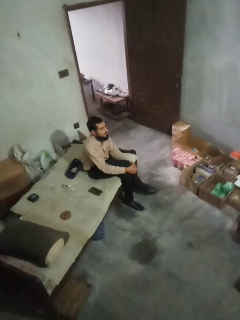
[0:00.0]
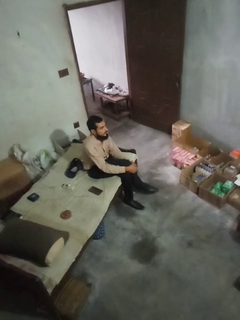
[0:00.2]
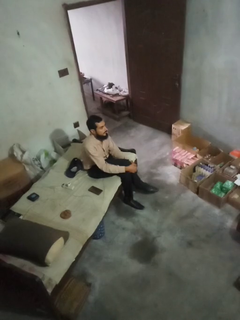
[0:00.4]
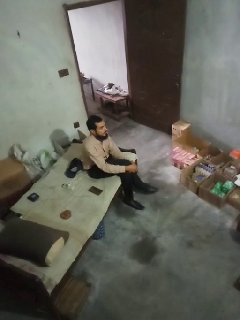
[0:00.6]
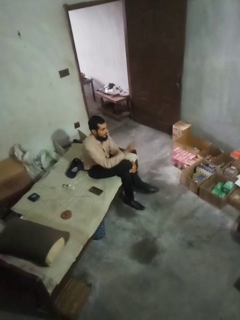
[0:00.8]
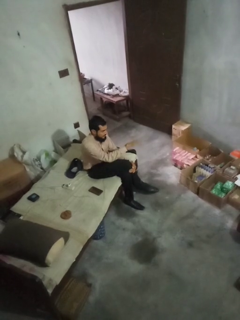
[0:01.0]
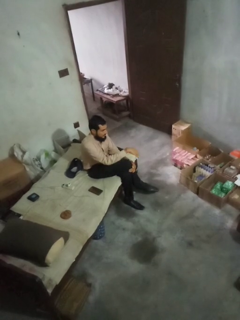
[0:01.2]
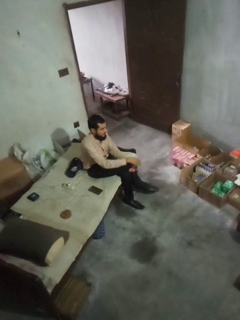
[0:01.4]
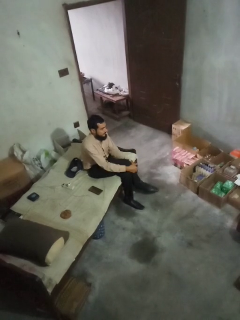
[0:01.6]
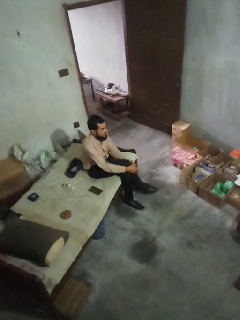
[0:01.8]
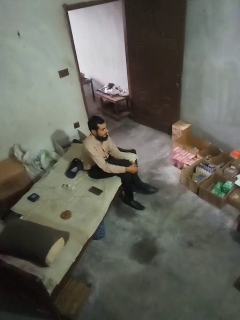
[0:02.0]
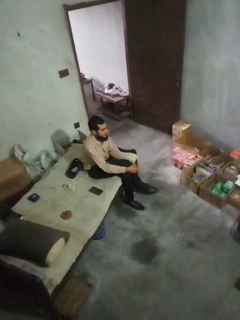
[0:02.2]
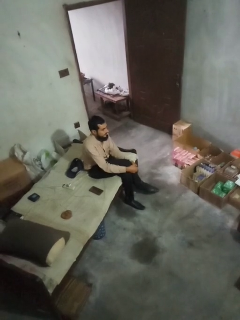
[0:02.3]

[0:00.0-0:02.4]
person gestures swipe down

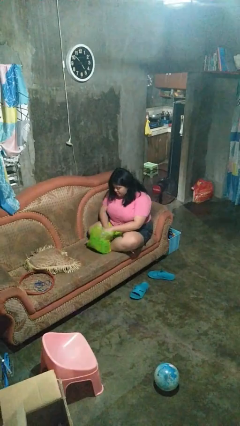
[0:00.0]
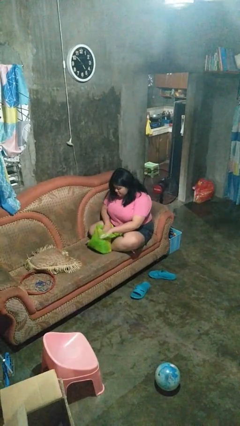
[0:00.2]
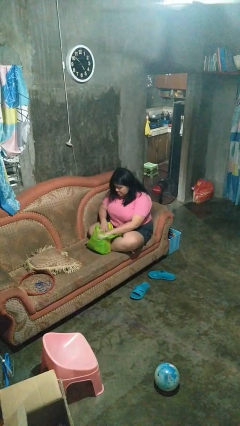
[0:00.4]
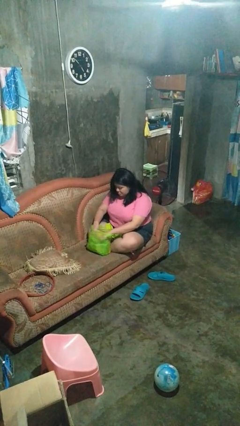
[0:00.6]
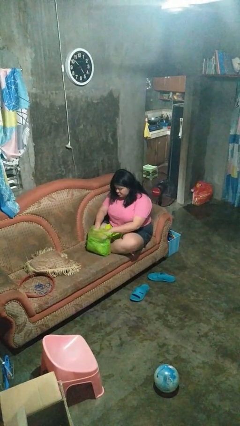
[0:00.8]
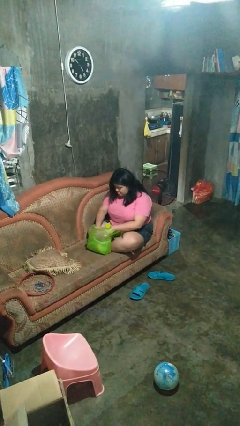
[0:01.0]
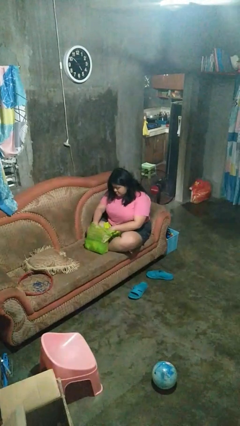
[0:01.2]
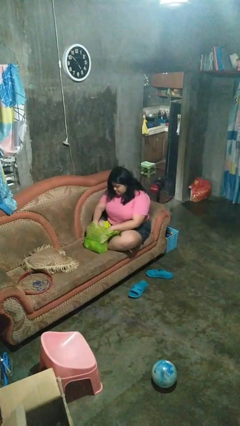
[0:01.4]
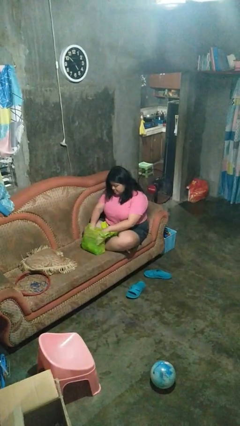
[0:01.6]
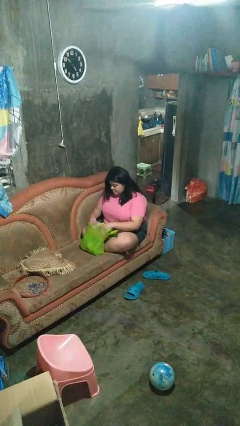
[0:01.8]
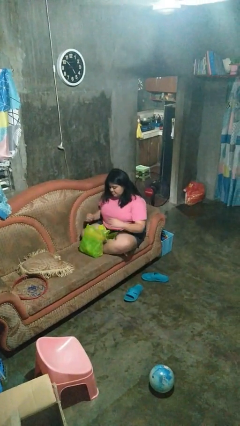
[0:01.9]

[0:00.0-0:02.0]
person searches in bag

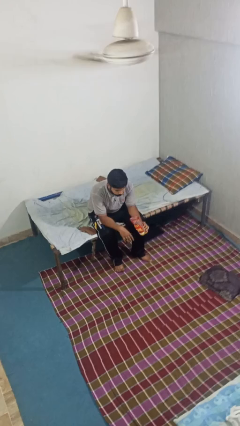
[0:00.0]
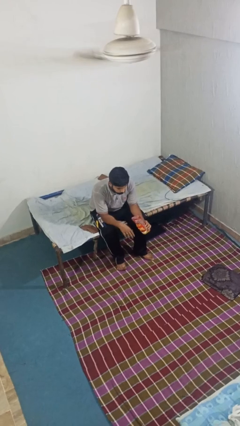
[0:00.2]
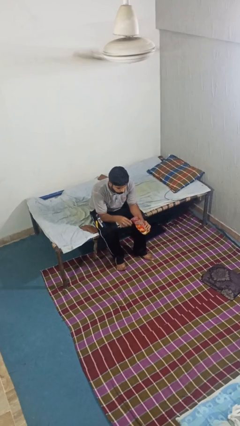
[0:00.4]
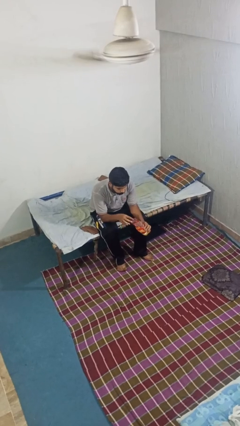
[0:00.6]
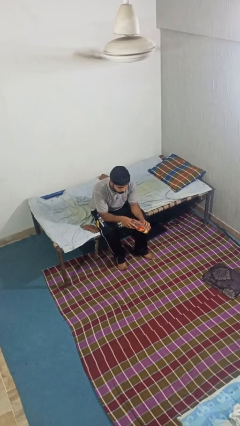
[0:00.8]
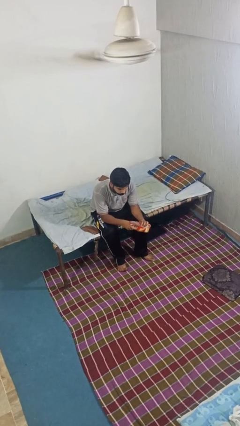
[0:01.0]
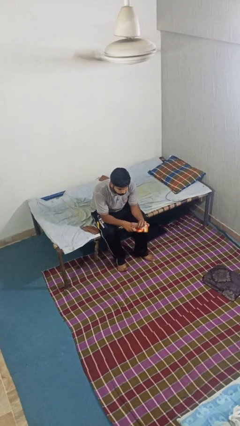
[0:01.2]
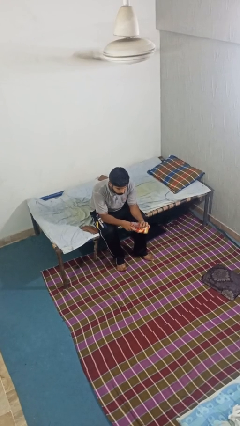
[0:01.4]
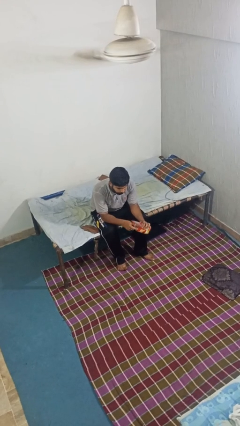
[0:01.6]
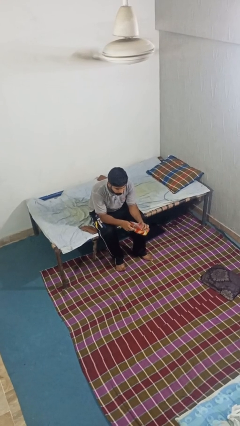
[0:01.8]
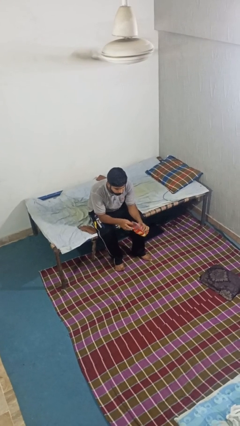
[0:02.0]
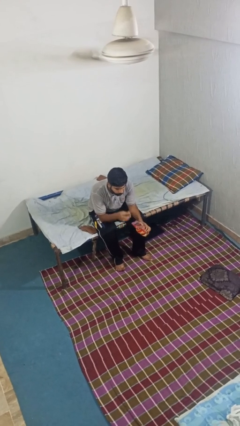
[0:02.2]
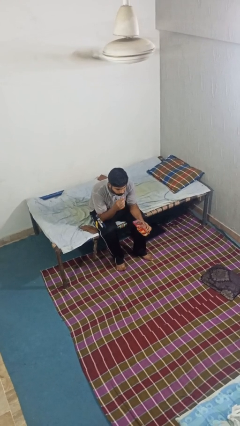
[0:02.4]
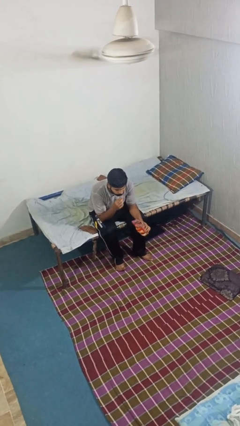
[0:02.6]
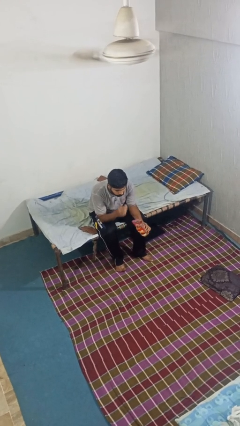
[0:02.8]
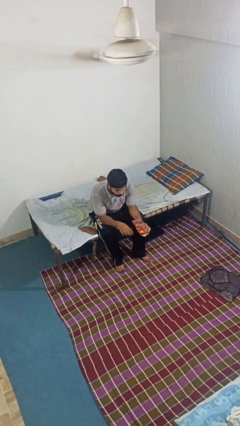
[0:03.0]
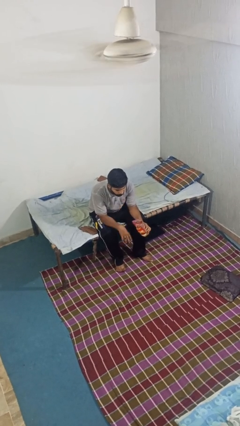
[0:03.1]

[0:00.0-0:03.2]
person eats snack from bag

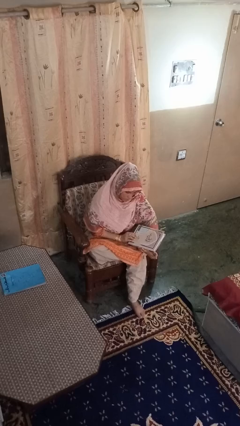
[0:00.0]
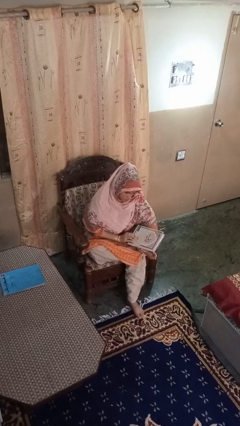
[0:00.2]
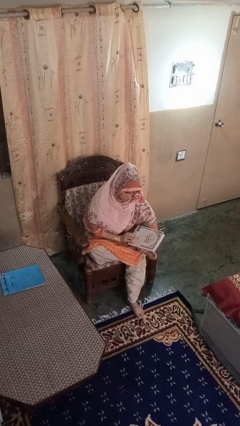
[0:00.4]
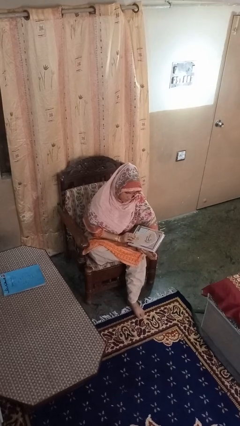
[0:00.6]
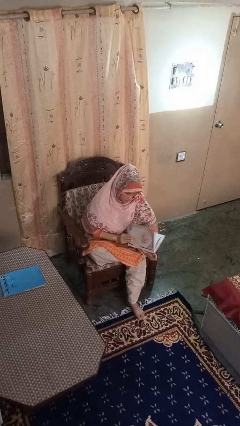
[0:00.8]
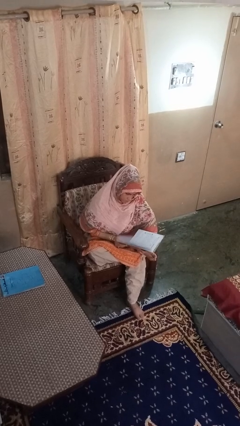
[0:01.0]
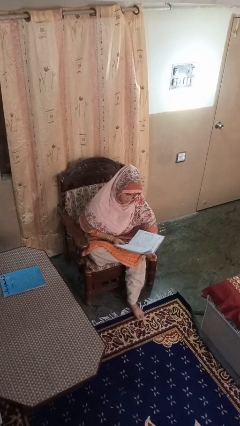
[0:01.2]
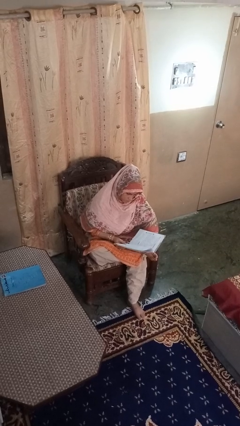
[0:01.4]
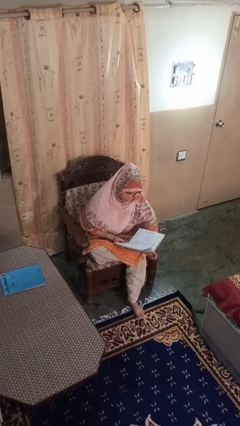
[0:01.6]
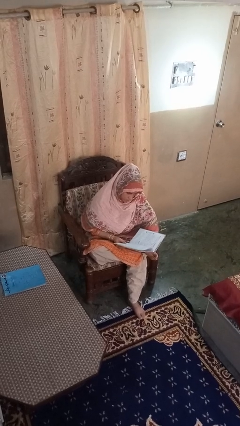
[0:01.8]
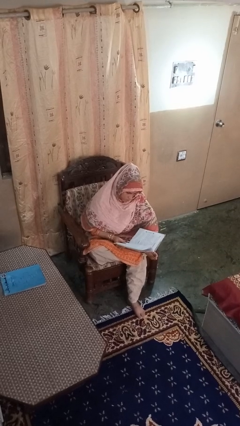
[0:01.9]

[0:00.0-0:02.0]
person reads book

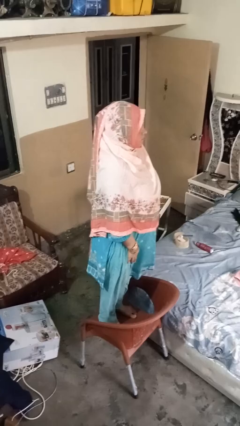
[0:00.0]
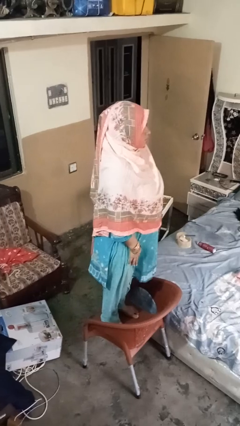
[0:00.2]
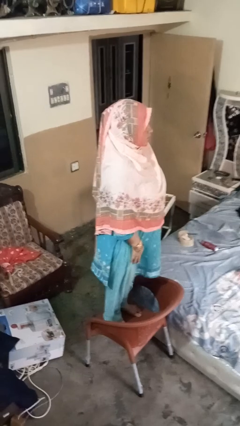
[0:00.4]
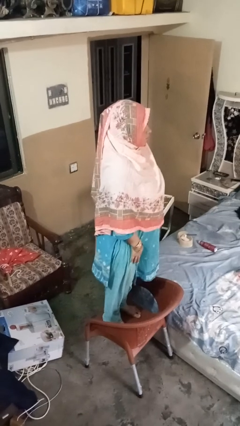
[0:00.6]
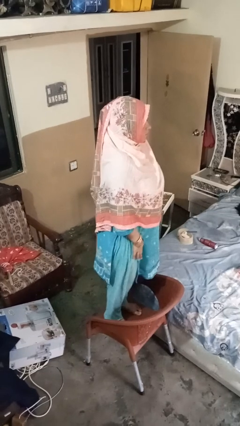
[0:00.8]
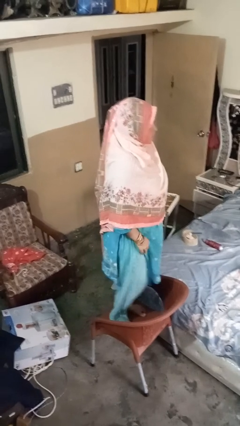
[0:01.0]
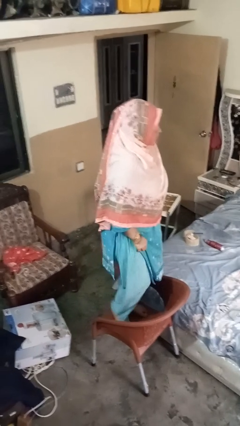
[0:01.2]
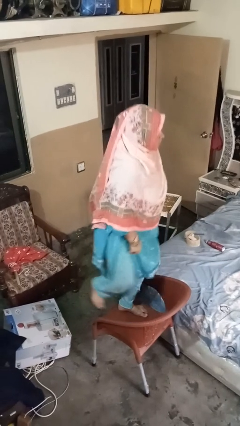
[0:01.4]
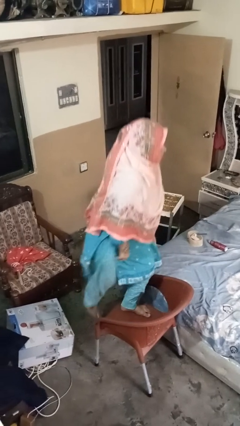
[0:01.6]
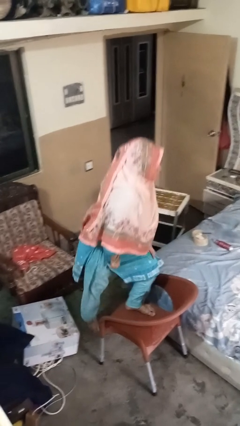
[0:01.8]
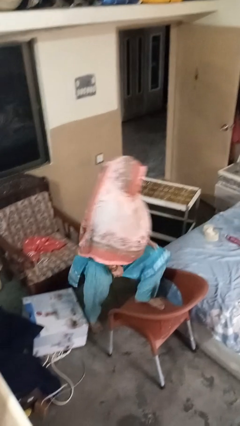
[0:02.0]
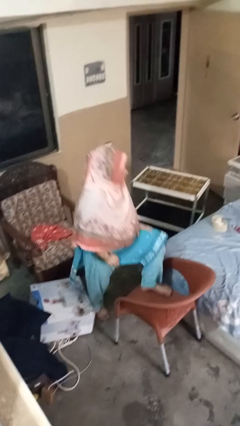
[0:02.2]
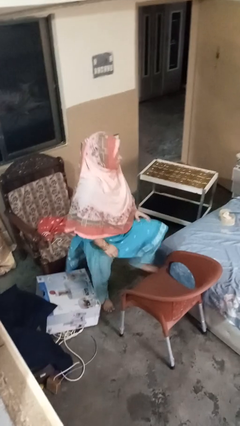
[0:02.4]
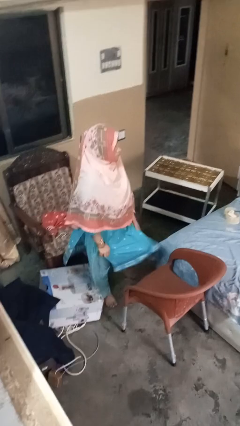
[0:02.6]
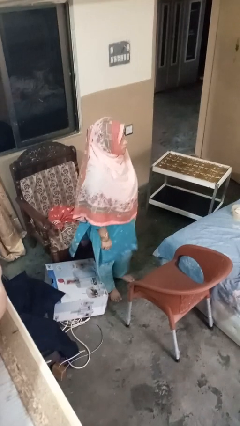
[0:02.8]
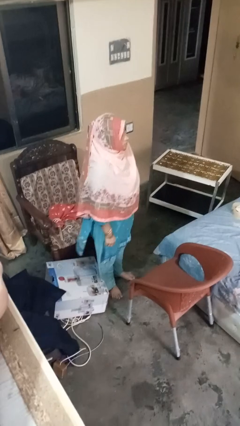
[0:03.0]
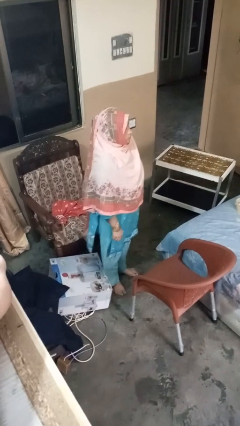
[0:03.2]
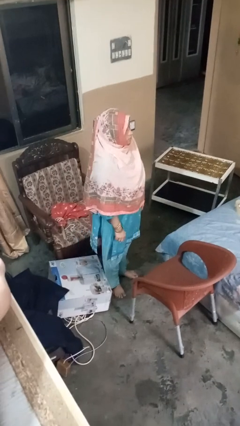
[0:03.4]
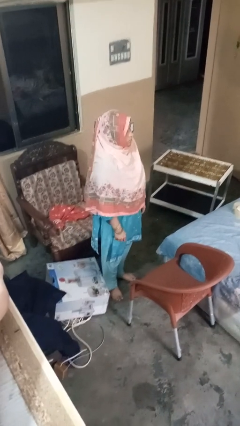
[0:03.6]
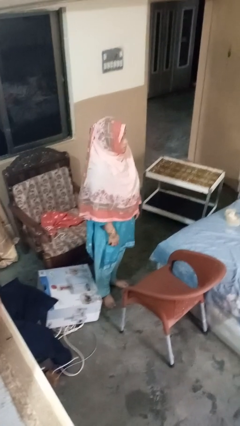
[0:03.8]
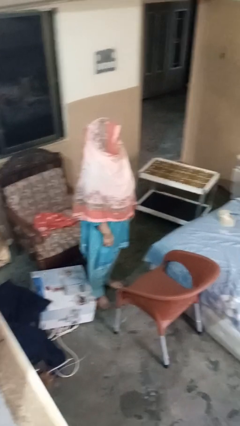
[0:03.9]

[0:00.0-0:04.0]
person climbs off chair

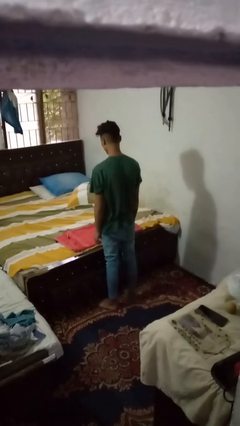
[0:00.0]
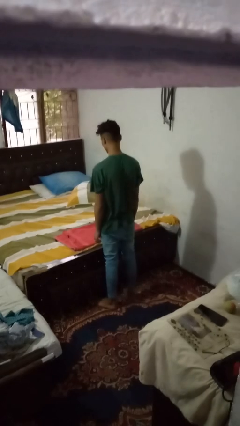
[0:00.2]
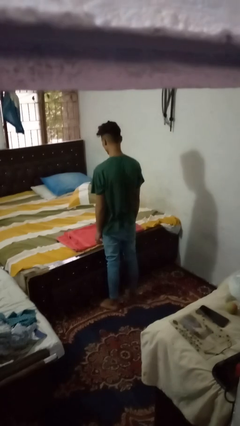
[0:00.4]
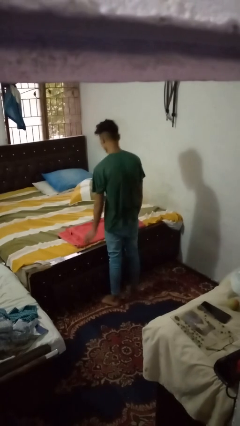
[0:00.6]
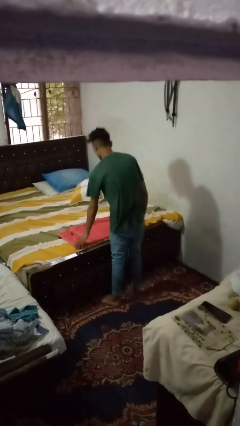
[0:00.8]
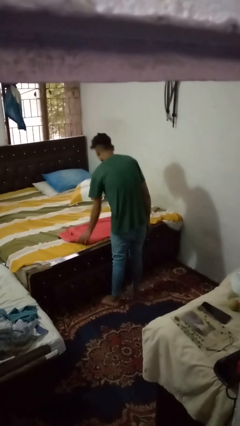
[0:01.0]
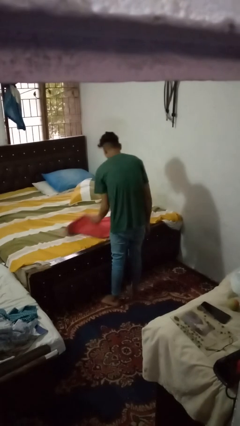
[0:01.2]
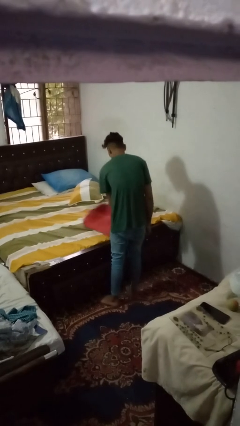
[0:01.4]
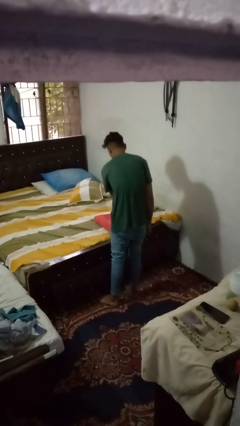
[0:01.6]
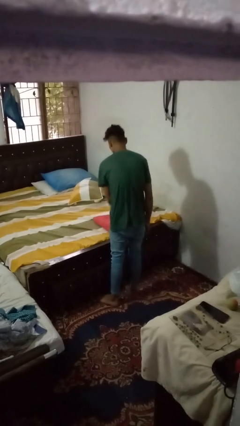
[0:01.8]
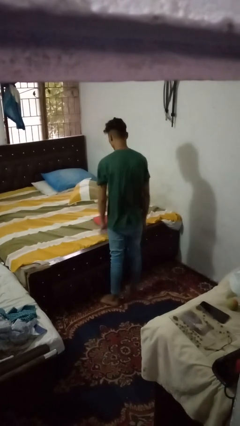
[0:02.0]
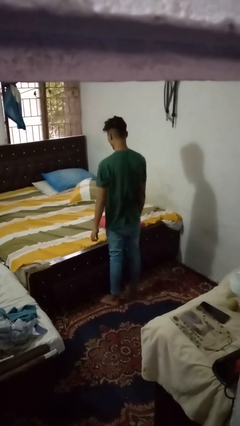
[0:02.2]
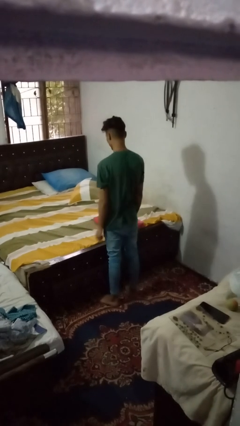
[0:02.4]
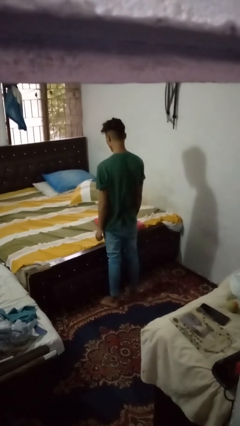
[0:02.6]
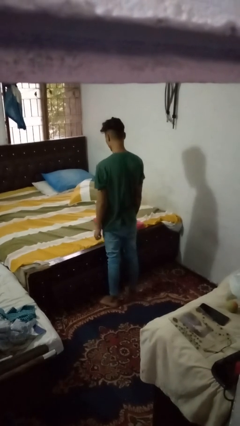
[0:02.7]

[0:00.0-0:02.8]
person folds towel

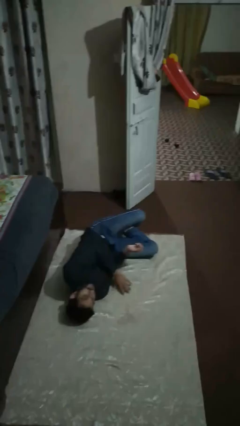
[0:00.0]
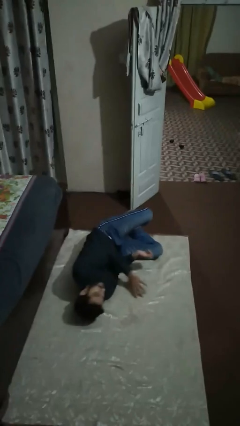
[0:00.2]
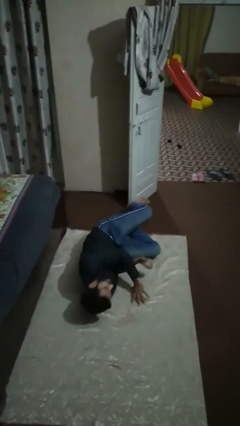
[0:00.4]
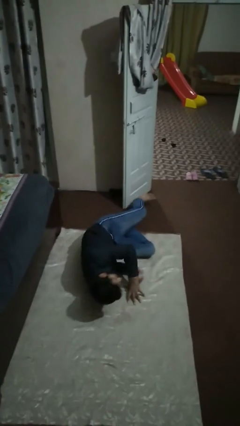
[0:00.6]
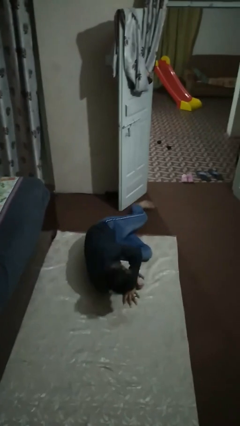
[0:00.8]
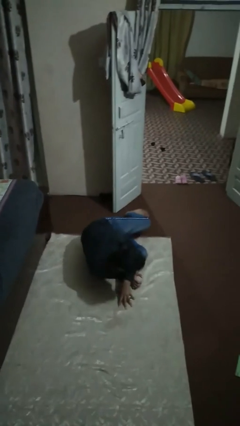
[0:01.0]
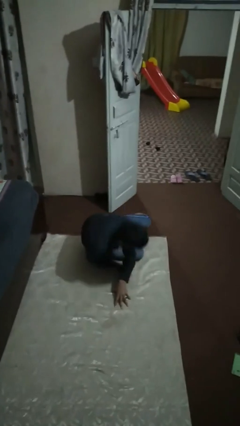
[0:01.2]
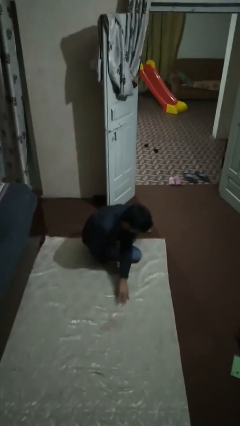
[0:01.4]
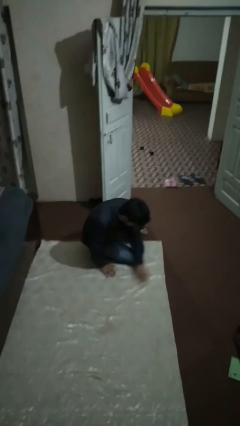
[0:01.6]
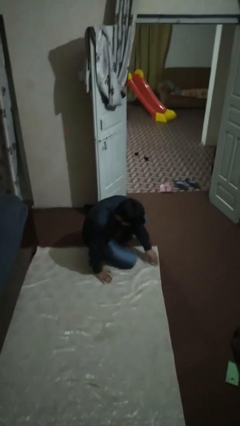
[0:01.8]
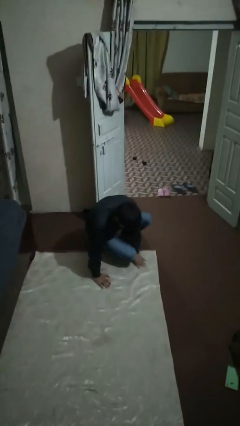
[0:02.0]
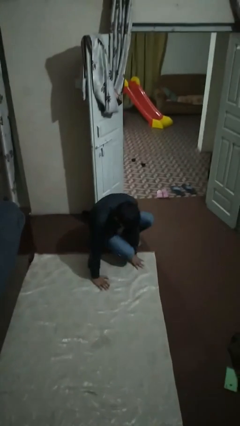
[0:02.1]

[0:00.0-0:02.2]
person stands up from floor
